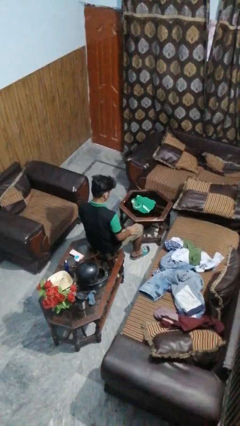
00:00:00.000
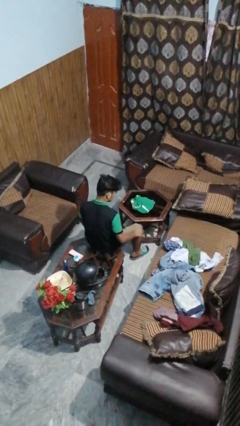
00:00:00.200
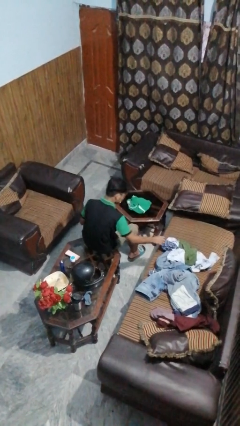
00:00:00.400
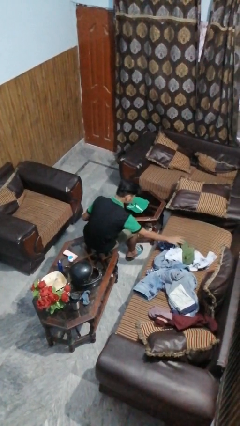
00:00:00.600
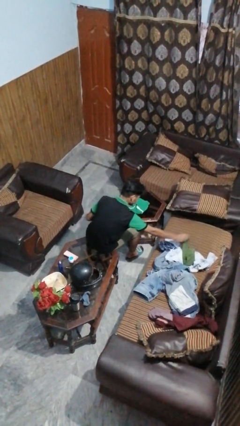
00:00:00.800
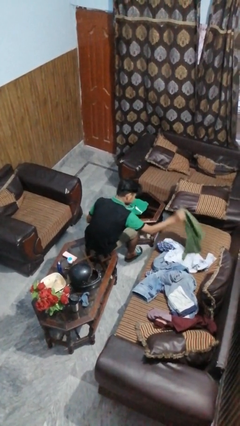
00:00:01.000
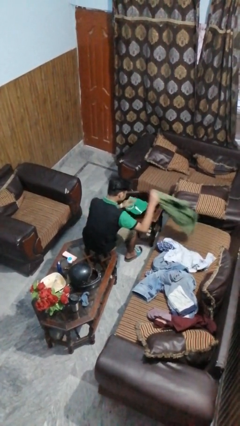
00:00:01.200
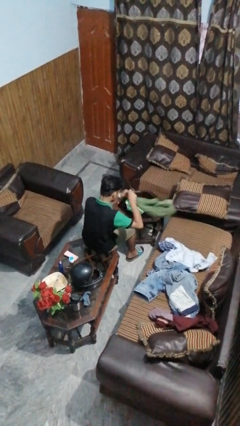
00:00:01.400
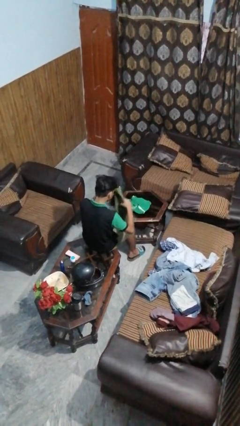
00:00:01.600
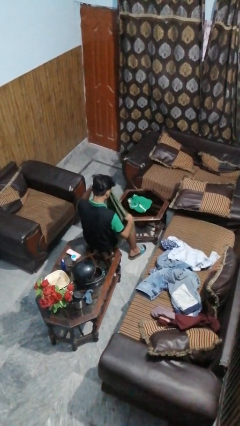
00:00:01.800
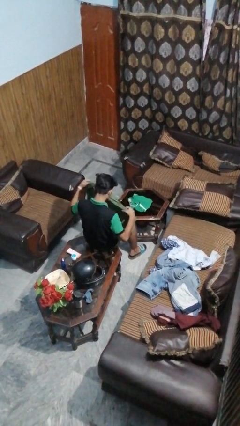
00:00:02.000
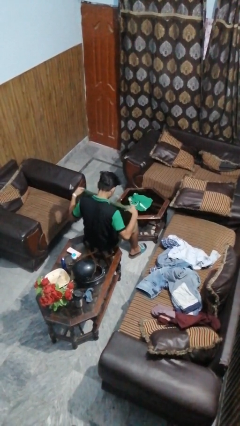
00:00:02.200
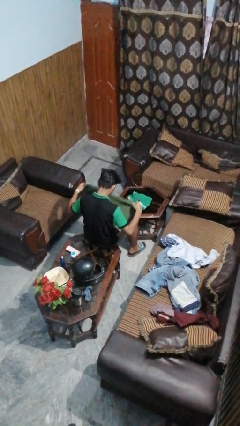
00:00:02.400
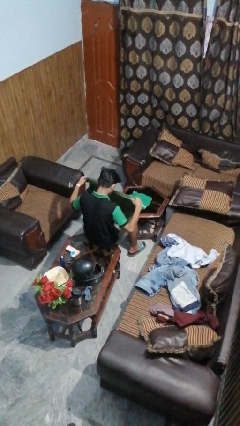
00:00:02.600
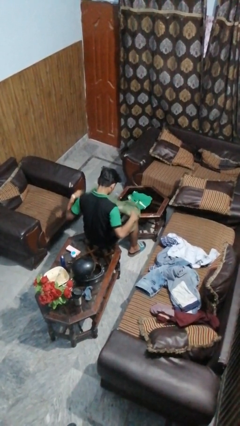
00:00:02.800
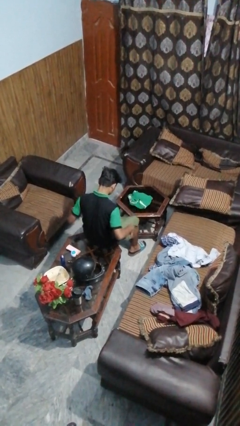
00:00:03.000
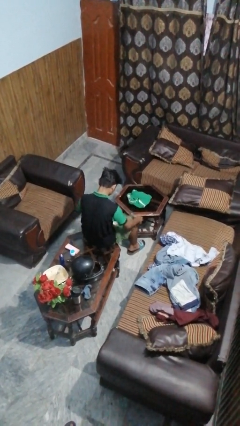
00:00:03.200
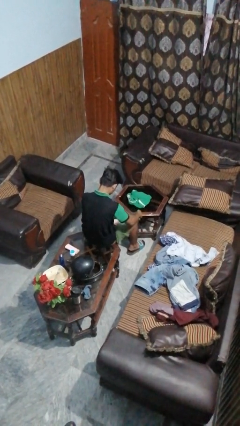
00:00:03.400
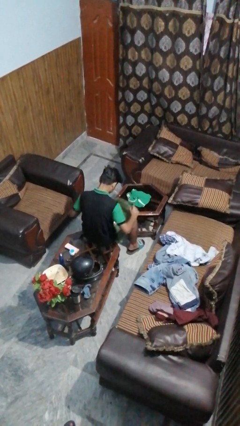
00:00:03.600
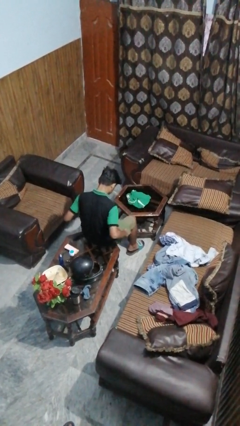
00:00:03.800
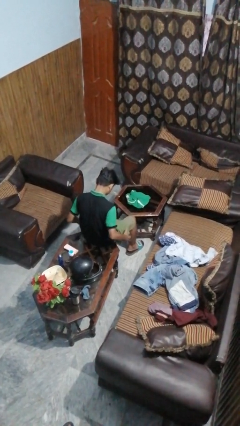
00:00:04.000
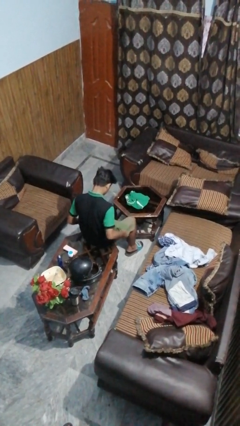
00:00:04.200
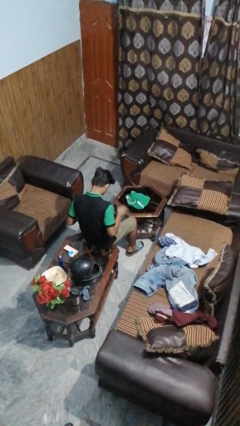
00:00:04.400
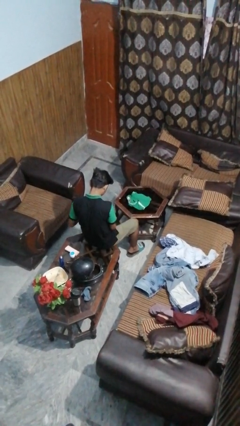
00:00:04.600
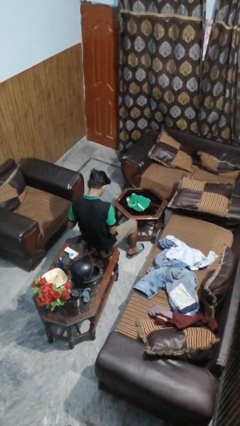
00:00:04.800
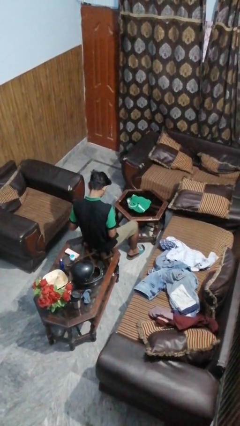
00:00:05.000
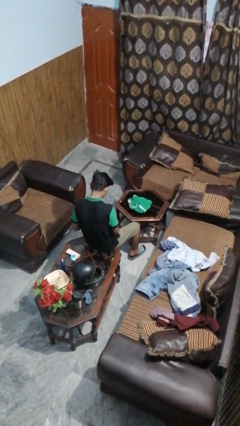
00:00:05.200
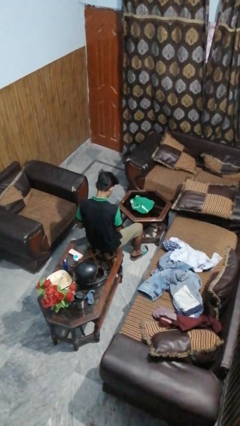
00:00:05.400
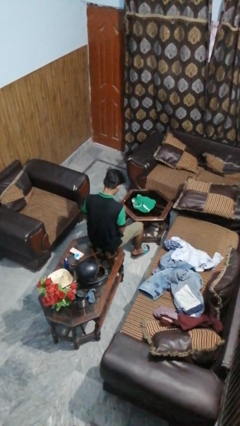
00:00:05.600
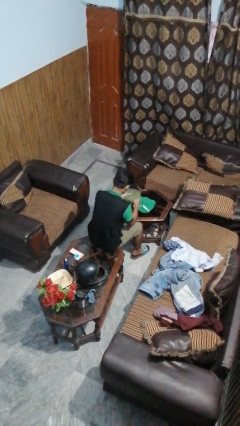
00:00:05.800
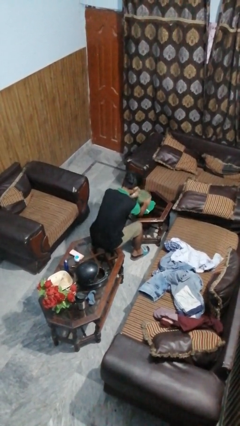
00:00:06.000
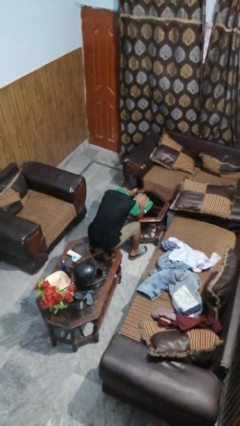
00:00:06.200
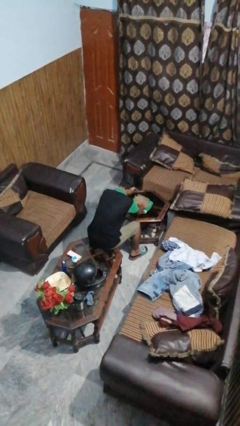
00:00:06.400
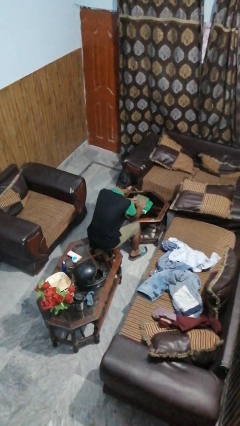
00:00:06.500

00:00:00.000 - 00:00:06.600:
person folds shirt

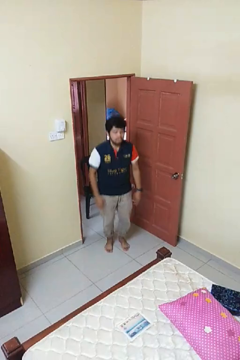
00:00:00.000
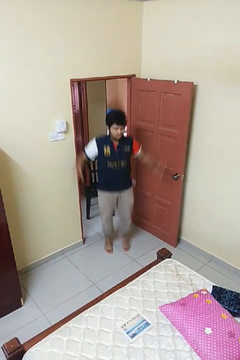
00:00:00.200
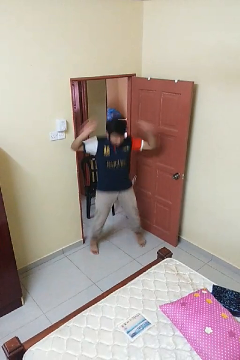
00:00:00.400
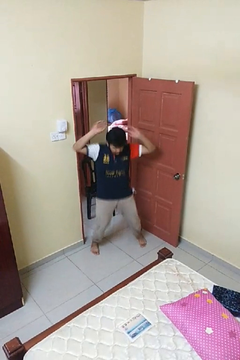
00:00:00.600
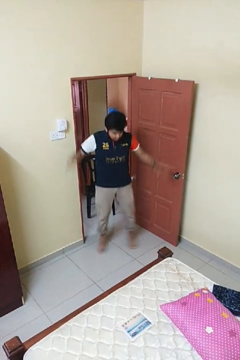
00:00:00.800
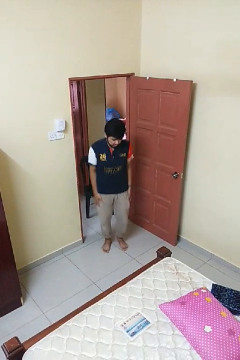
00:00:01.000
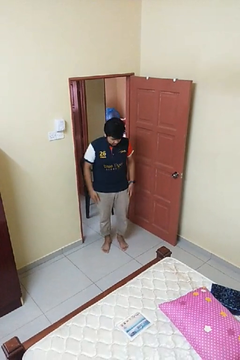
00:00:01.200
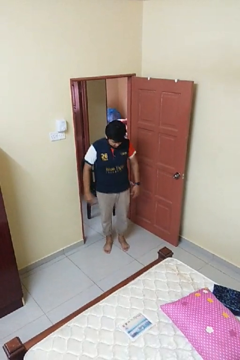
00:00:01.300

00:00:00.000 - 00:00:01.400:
person exercises with jumping jacks

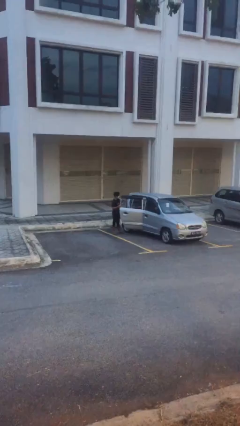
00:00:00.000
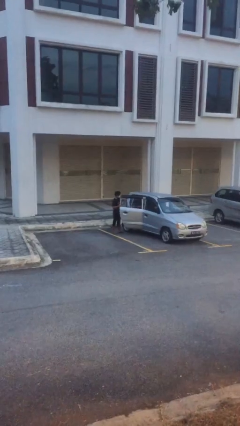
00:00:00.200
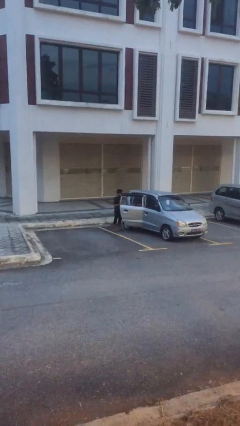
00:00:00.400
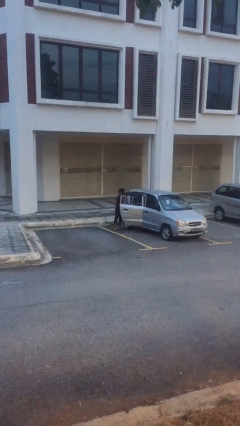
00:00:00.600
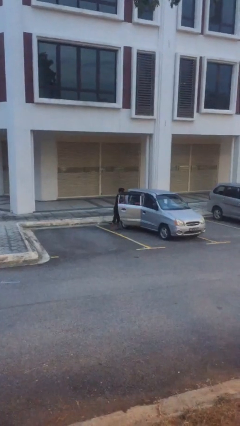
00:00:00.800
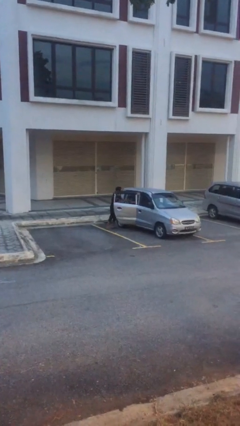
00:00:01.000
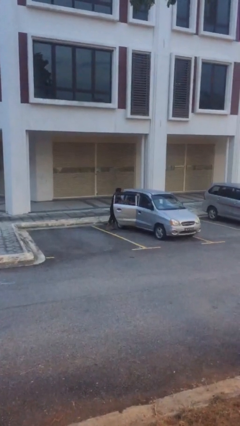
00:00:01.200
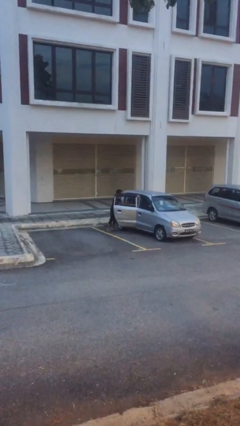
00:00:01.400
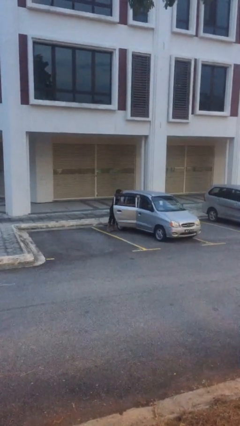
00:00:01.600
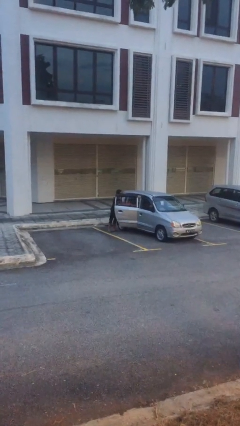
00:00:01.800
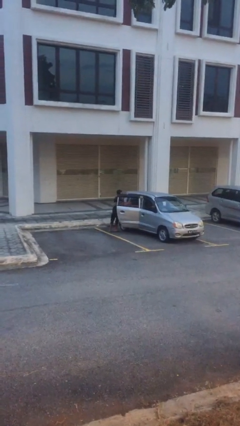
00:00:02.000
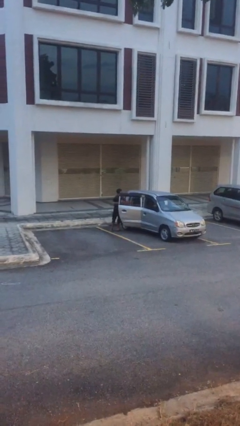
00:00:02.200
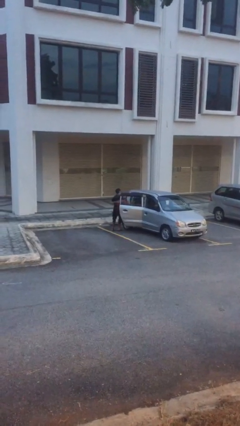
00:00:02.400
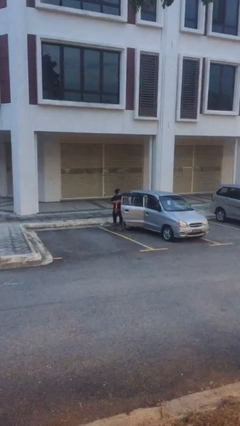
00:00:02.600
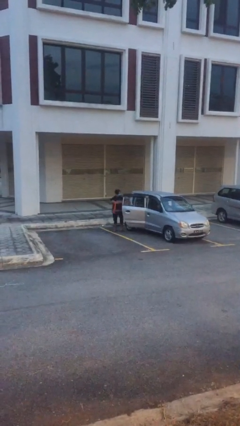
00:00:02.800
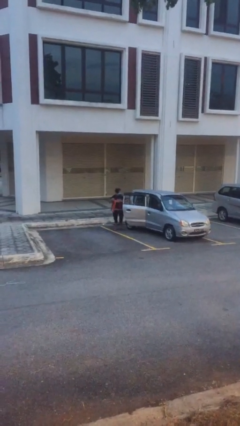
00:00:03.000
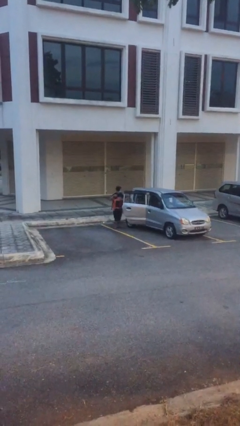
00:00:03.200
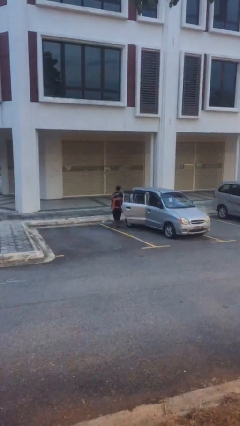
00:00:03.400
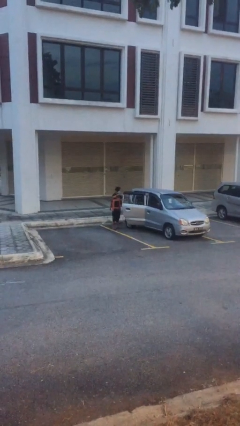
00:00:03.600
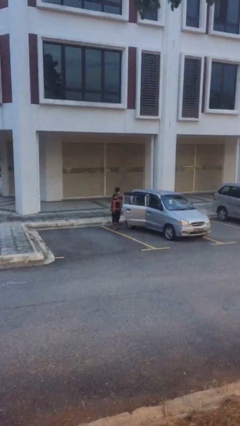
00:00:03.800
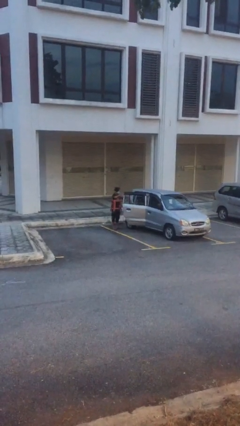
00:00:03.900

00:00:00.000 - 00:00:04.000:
person unloads car

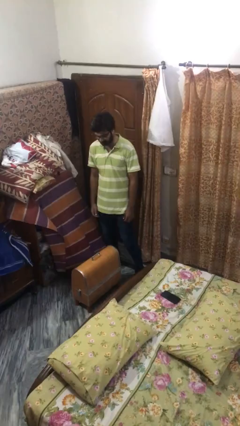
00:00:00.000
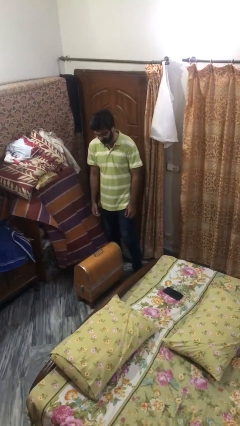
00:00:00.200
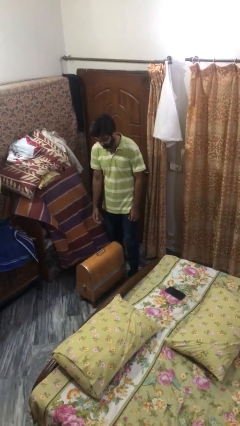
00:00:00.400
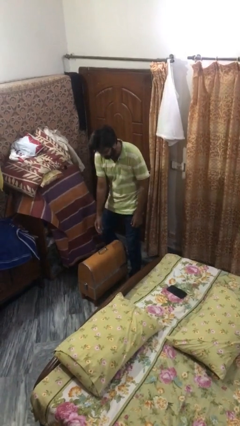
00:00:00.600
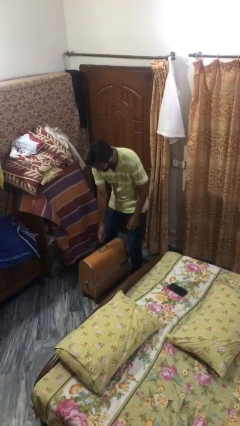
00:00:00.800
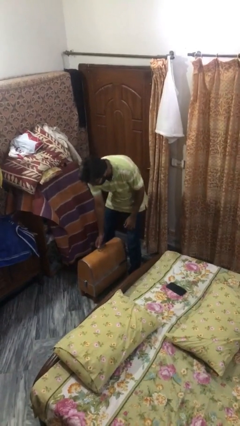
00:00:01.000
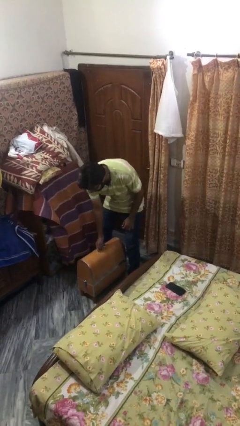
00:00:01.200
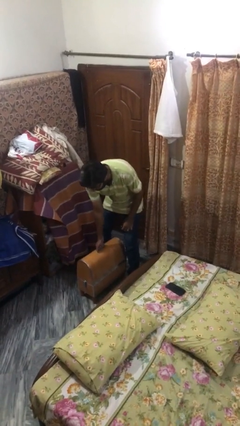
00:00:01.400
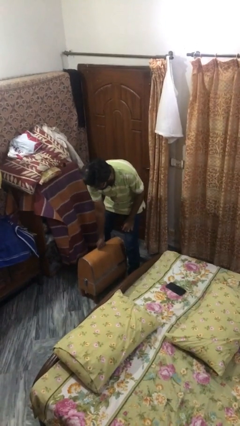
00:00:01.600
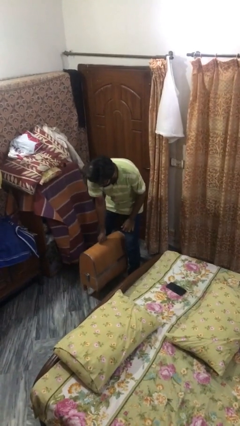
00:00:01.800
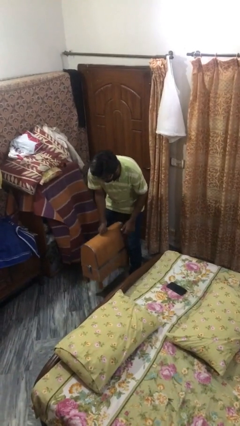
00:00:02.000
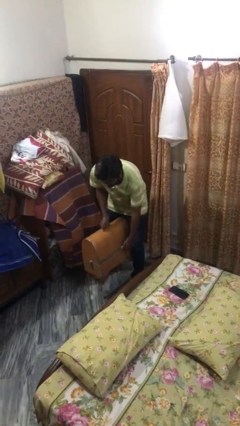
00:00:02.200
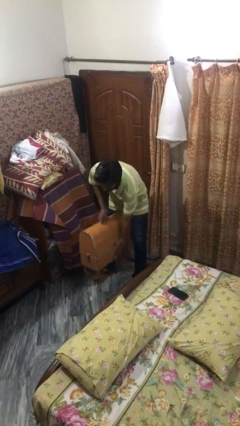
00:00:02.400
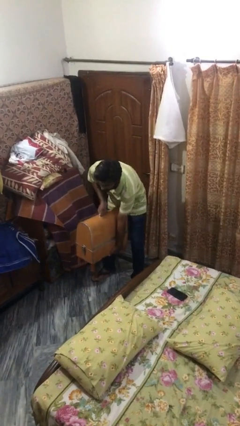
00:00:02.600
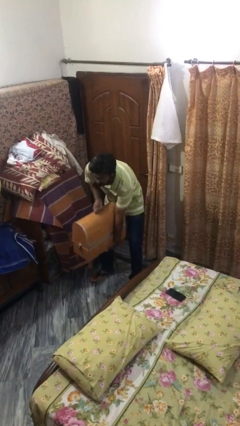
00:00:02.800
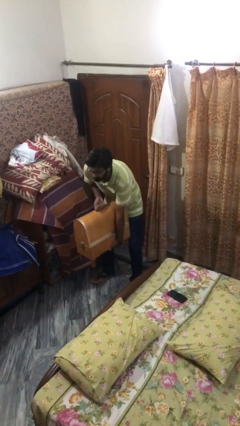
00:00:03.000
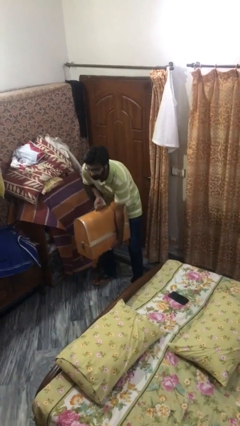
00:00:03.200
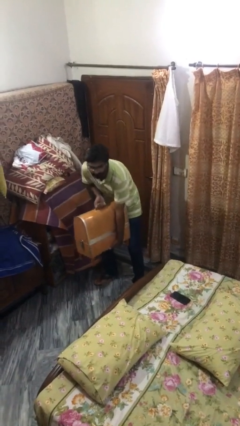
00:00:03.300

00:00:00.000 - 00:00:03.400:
person picks up object from floor

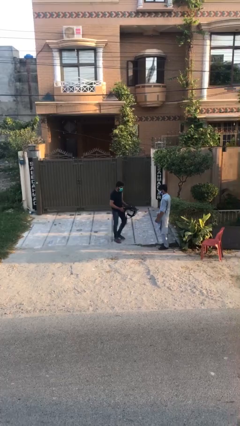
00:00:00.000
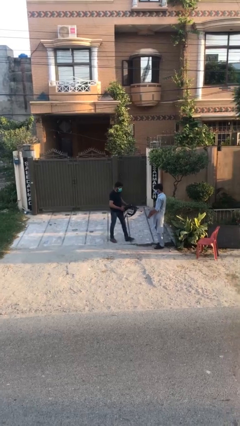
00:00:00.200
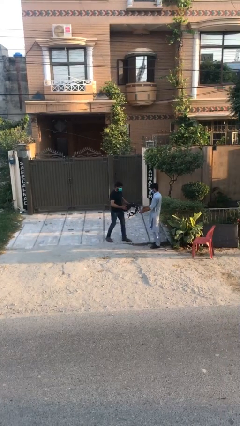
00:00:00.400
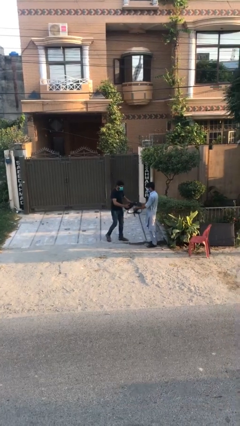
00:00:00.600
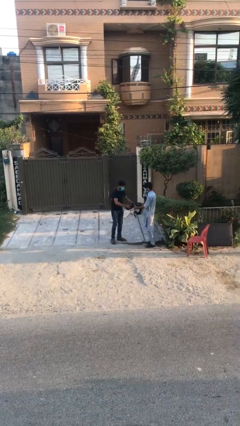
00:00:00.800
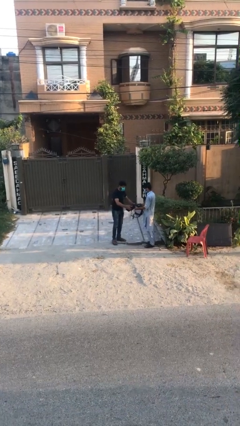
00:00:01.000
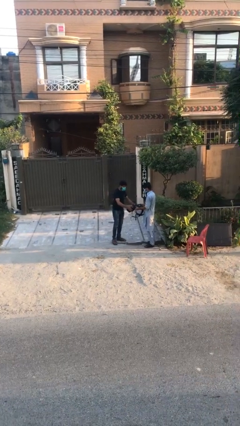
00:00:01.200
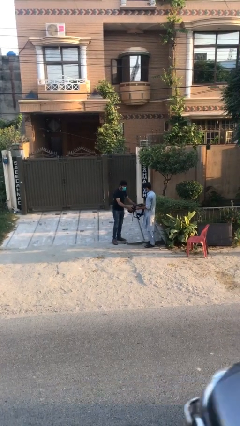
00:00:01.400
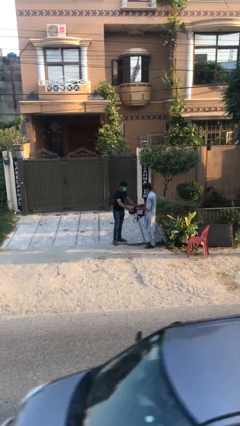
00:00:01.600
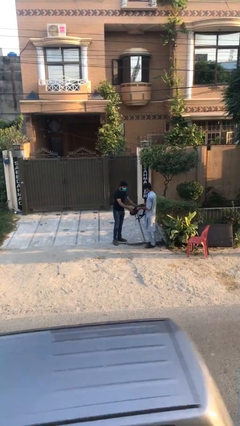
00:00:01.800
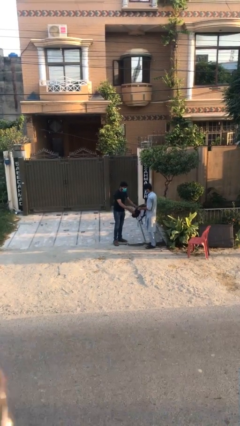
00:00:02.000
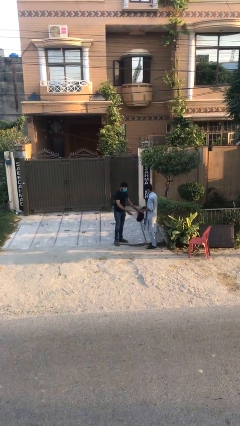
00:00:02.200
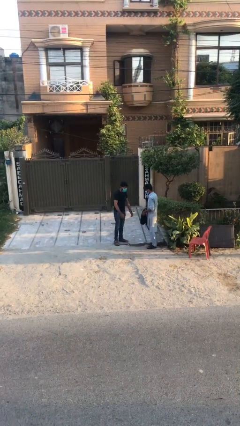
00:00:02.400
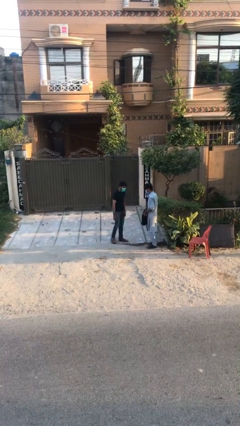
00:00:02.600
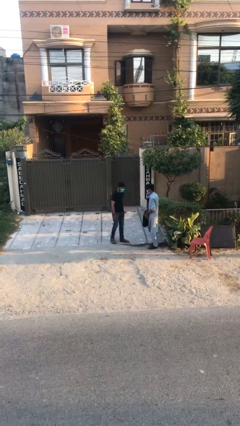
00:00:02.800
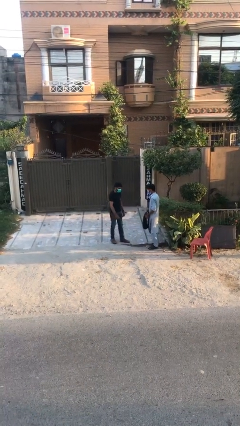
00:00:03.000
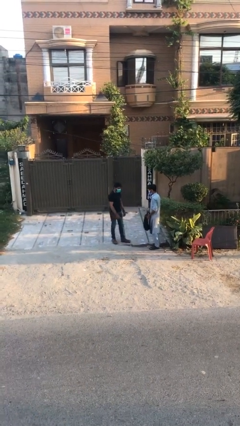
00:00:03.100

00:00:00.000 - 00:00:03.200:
person transfers object to person
